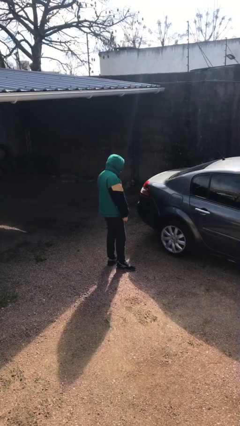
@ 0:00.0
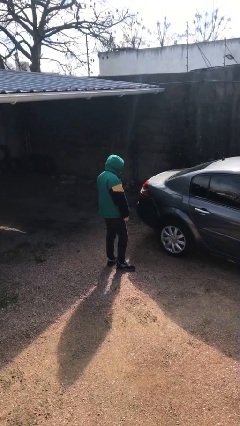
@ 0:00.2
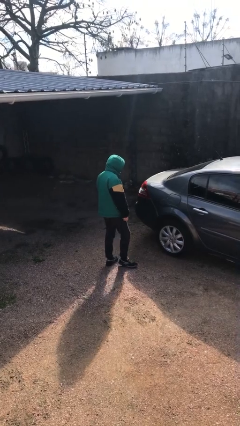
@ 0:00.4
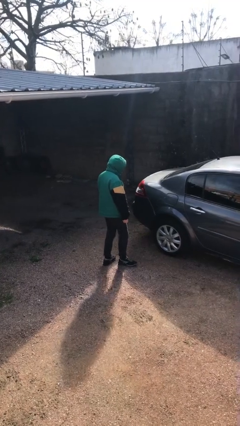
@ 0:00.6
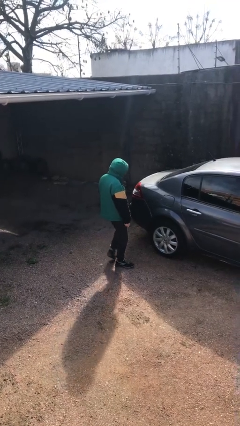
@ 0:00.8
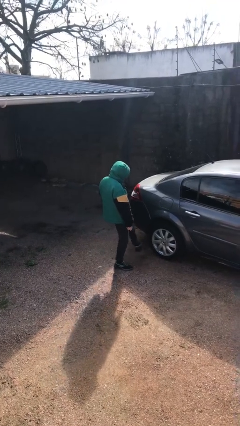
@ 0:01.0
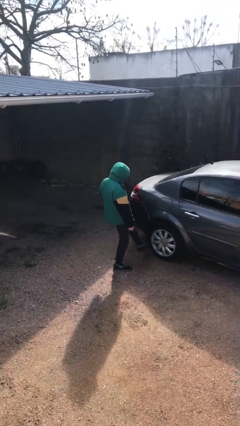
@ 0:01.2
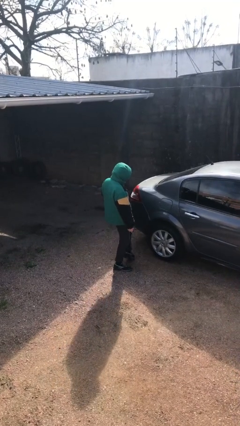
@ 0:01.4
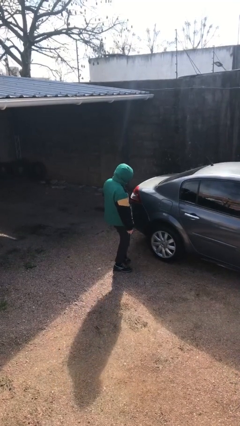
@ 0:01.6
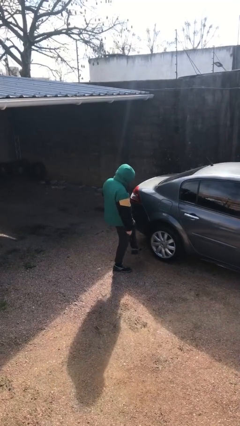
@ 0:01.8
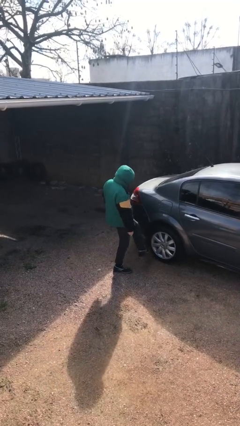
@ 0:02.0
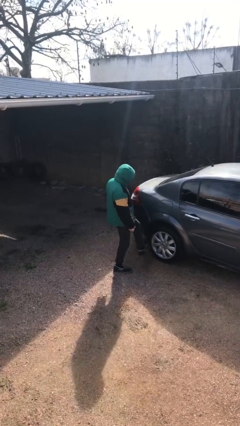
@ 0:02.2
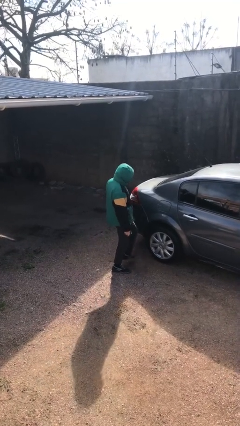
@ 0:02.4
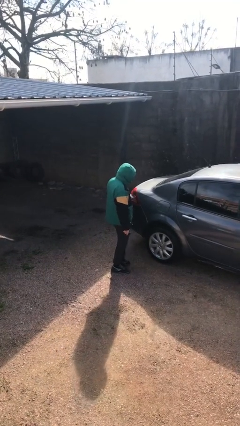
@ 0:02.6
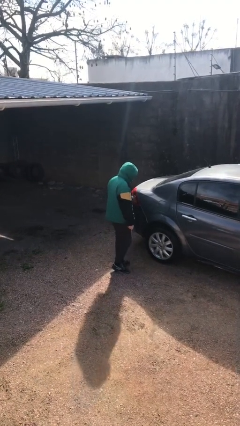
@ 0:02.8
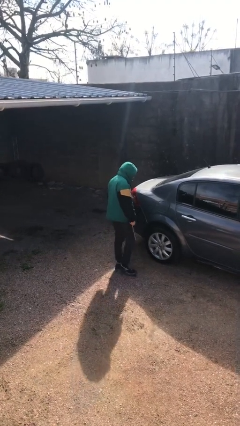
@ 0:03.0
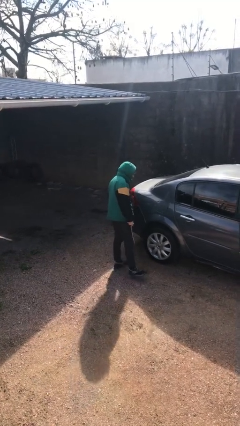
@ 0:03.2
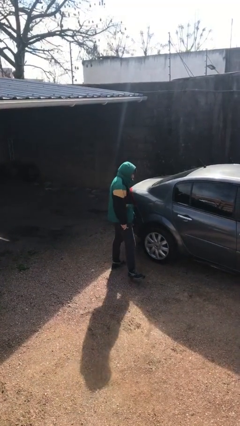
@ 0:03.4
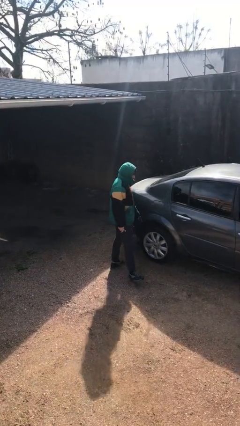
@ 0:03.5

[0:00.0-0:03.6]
person kicks car tires

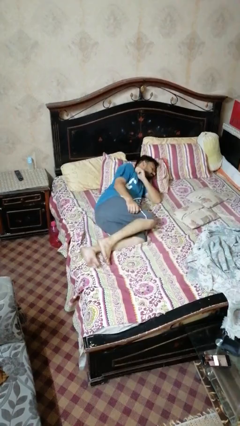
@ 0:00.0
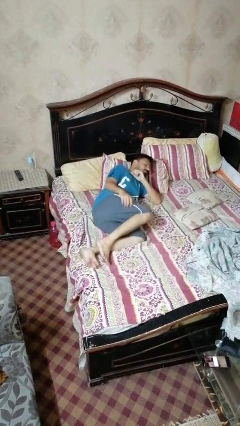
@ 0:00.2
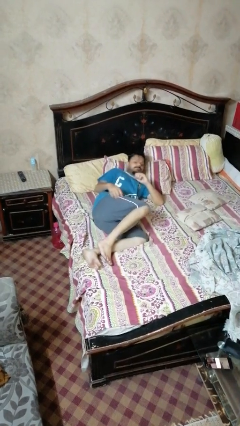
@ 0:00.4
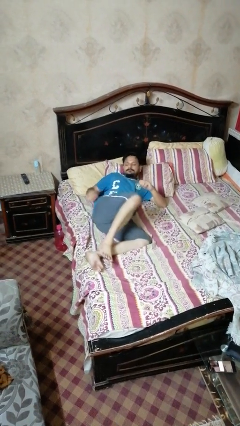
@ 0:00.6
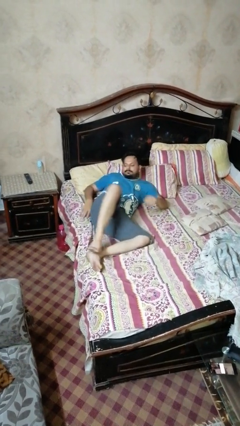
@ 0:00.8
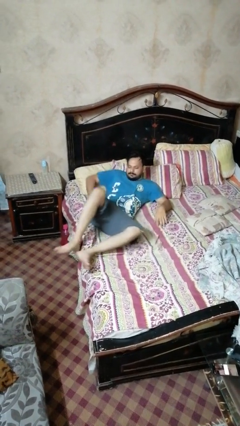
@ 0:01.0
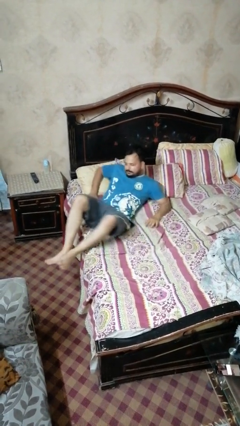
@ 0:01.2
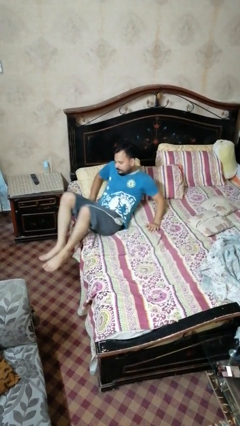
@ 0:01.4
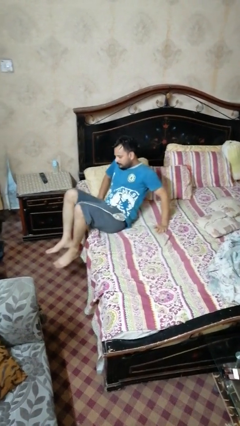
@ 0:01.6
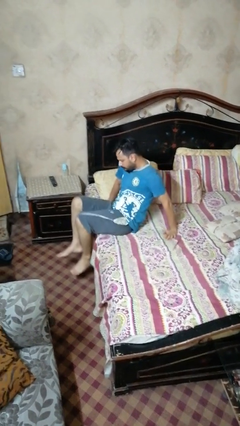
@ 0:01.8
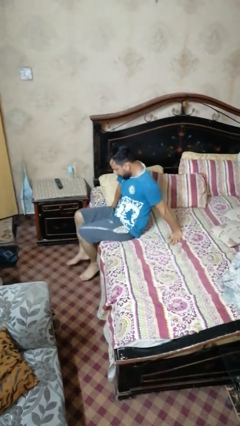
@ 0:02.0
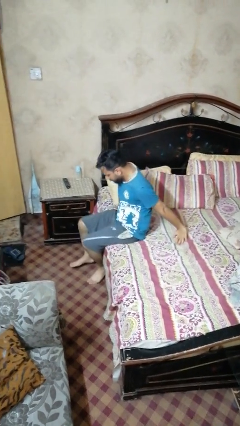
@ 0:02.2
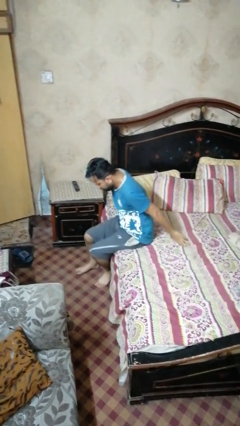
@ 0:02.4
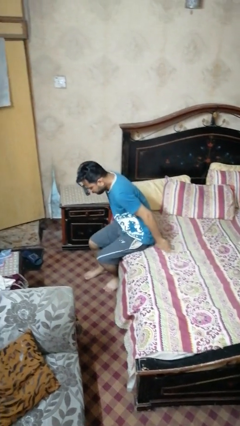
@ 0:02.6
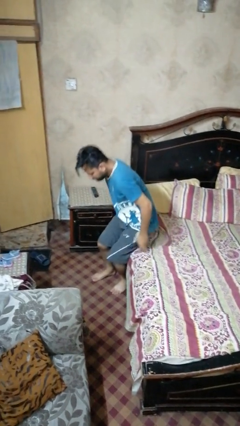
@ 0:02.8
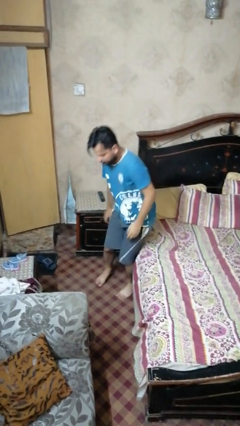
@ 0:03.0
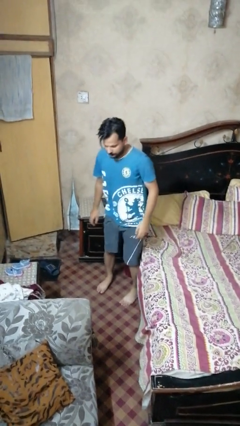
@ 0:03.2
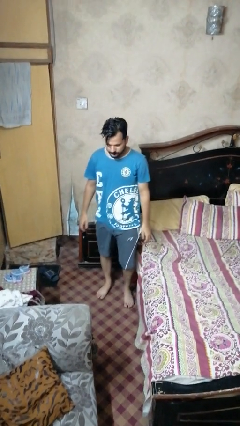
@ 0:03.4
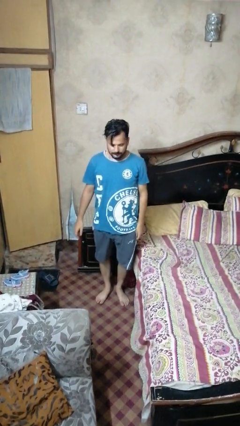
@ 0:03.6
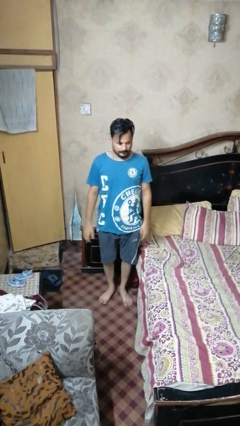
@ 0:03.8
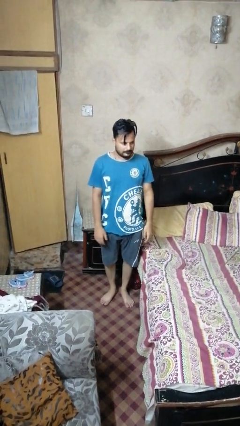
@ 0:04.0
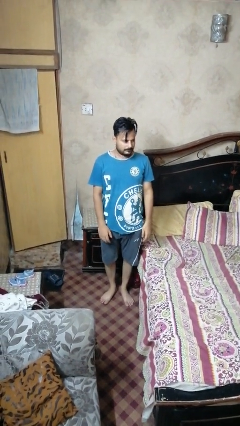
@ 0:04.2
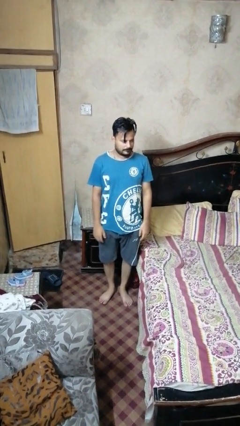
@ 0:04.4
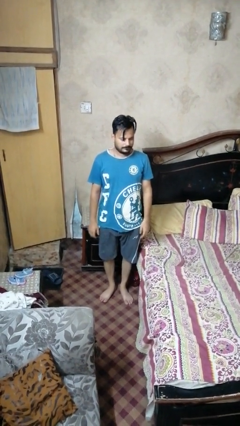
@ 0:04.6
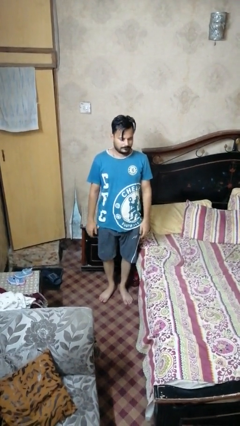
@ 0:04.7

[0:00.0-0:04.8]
person stands up

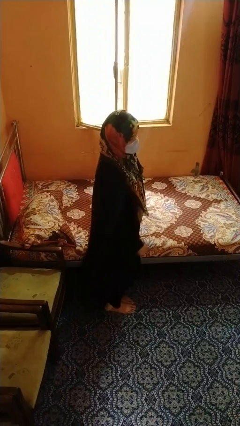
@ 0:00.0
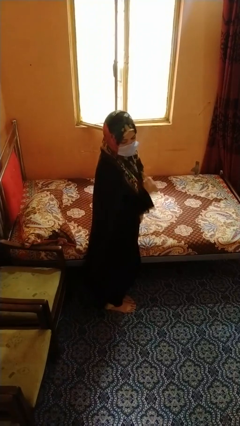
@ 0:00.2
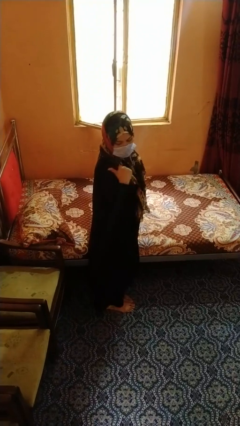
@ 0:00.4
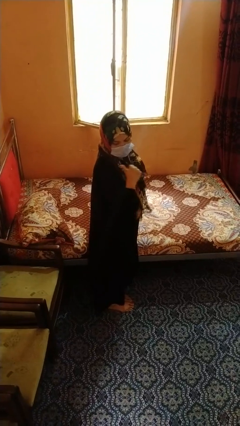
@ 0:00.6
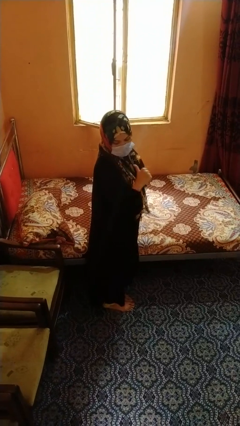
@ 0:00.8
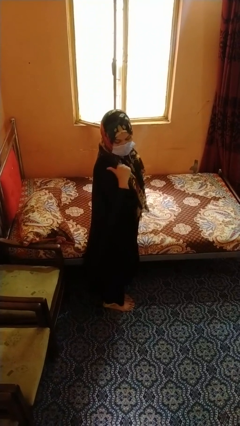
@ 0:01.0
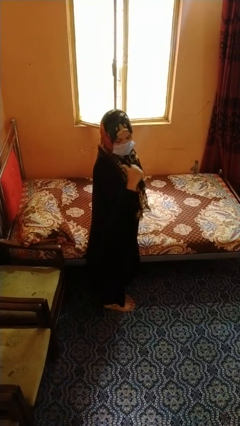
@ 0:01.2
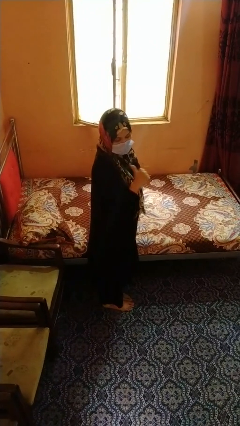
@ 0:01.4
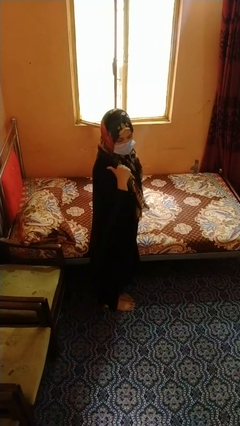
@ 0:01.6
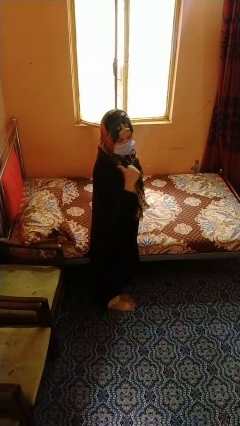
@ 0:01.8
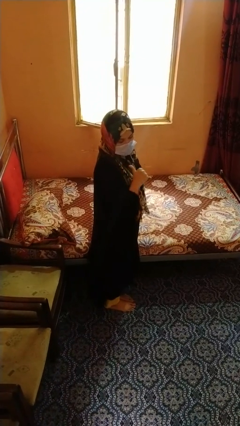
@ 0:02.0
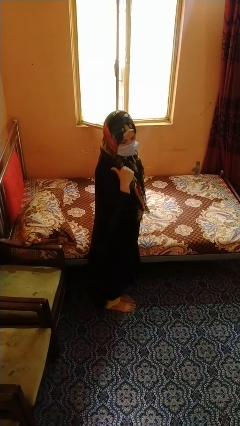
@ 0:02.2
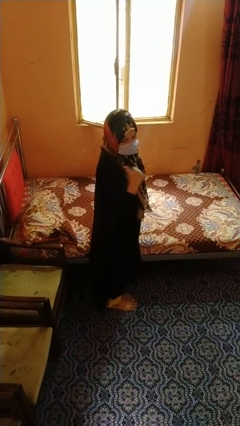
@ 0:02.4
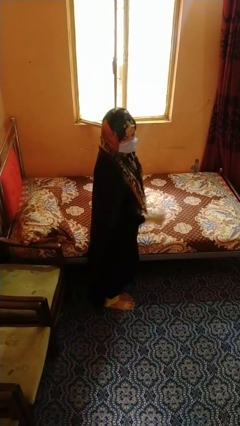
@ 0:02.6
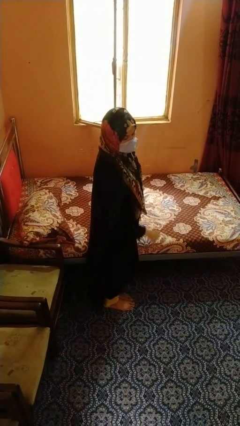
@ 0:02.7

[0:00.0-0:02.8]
person gestures behind me

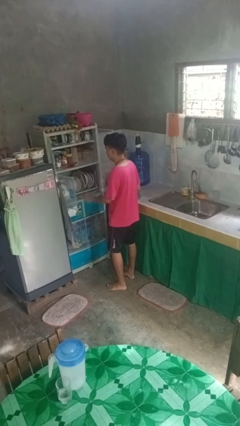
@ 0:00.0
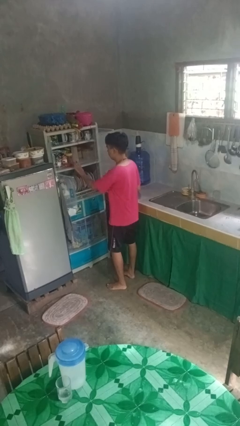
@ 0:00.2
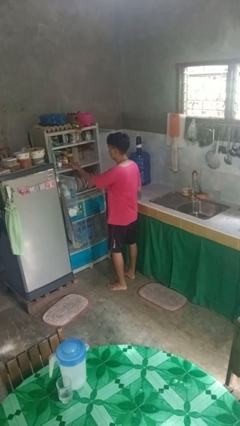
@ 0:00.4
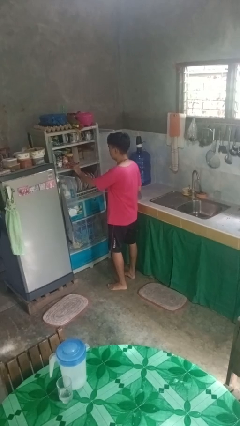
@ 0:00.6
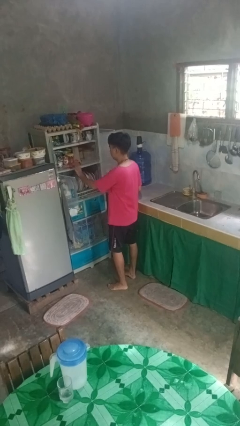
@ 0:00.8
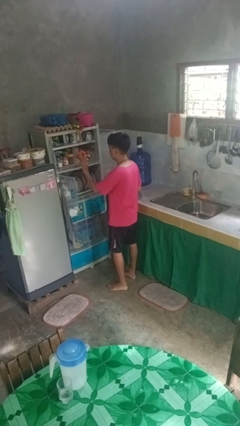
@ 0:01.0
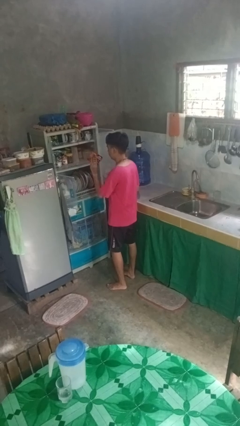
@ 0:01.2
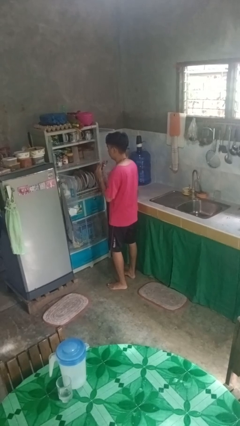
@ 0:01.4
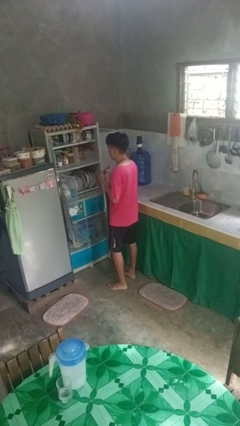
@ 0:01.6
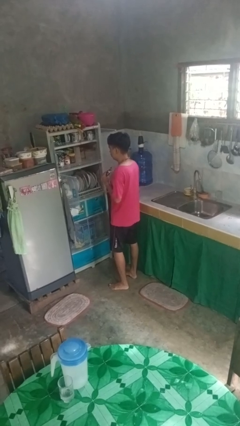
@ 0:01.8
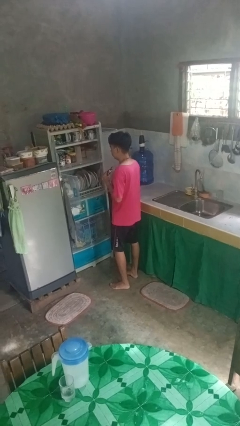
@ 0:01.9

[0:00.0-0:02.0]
person takes object from cabinet

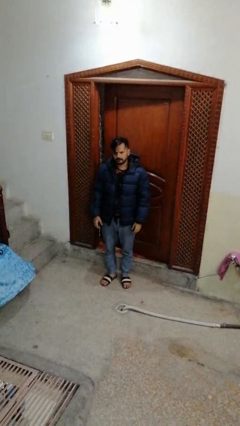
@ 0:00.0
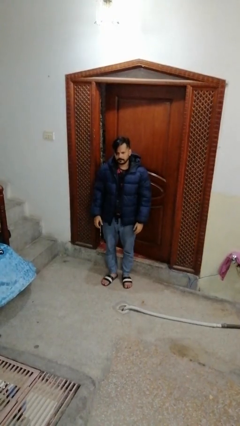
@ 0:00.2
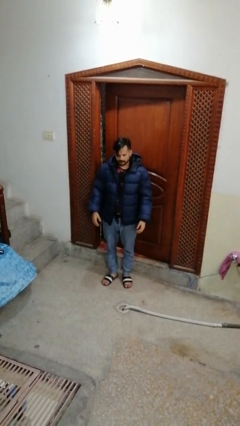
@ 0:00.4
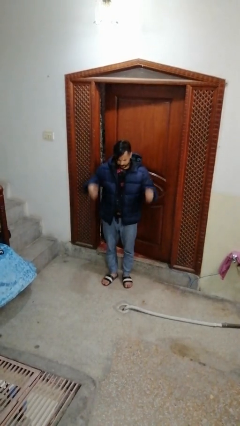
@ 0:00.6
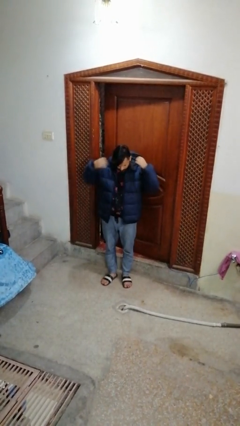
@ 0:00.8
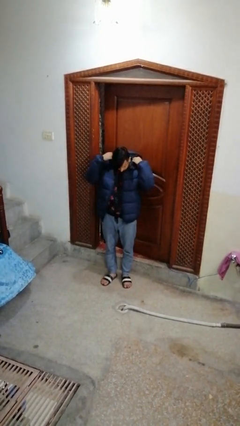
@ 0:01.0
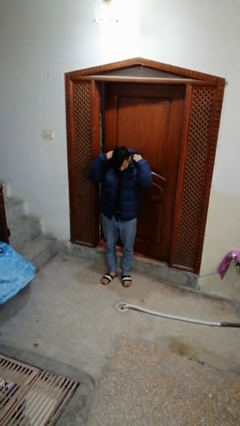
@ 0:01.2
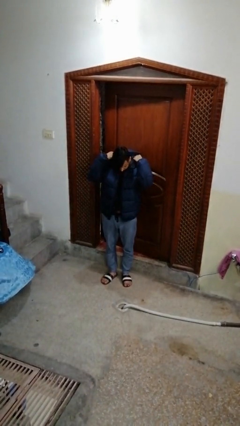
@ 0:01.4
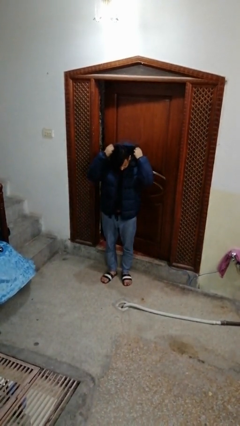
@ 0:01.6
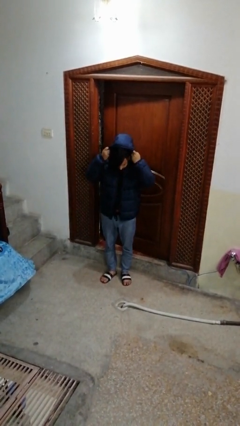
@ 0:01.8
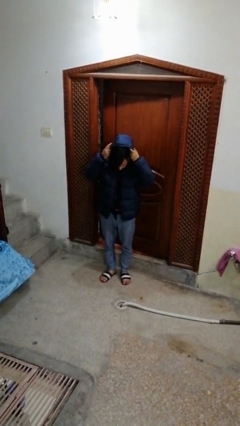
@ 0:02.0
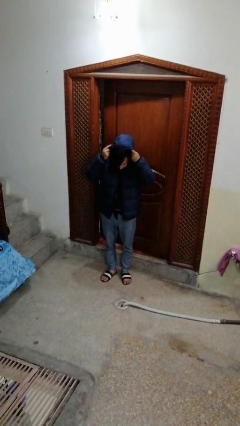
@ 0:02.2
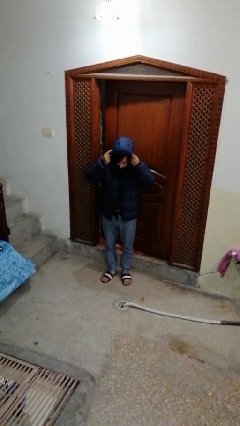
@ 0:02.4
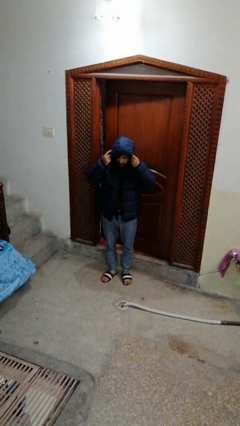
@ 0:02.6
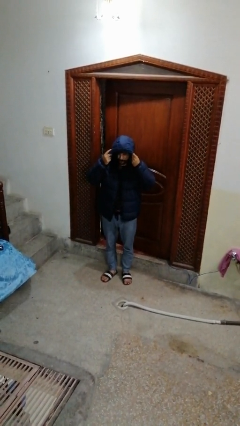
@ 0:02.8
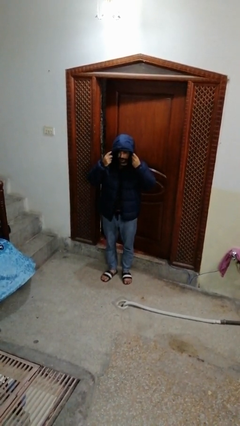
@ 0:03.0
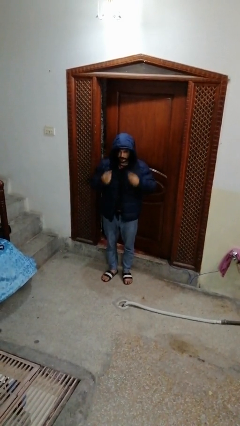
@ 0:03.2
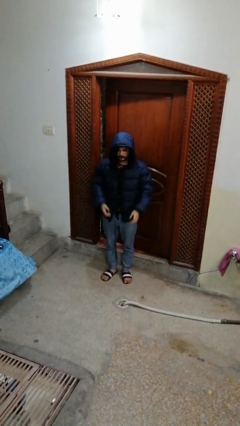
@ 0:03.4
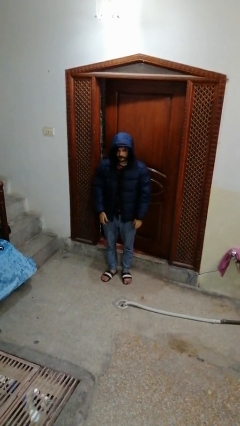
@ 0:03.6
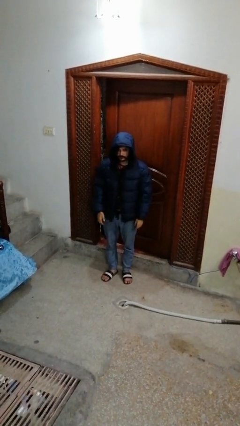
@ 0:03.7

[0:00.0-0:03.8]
person puts on hoodie

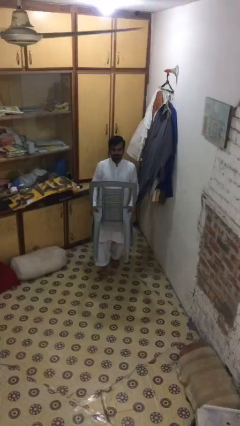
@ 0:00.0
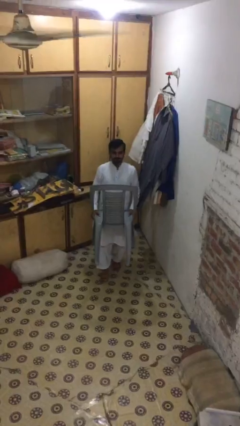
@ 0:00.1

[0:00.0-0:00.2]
person carries heavy object
